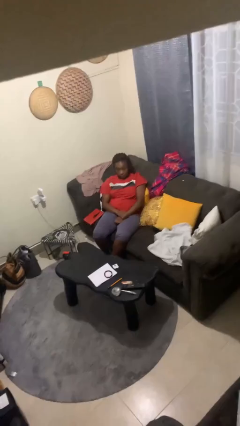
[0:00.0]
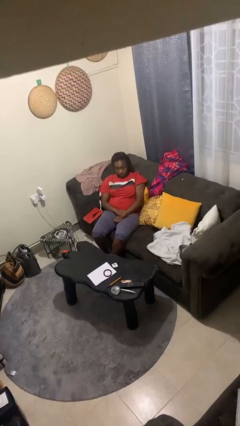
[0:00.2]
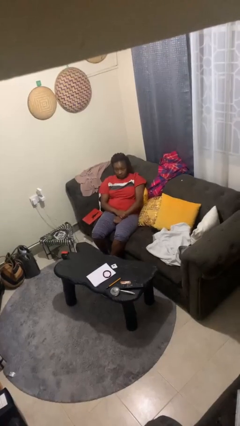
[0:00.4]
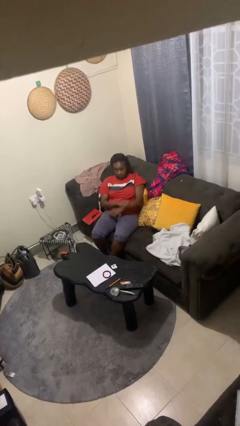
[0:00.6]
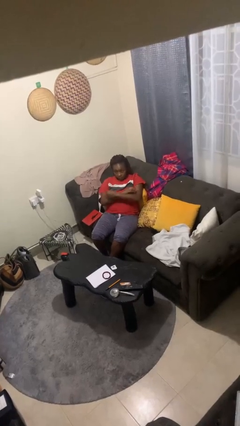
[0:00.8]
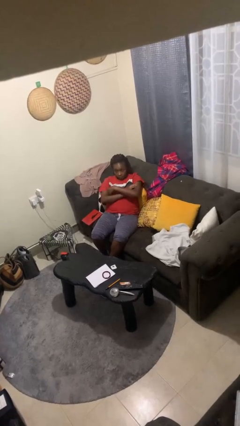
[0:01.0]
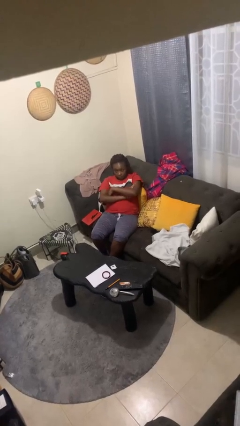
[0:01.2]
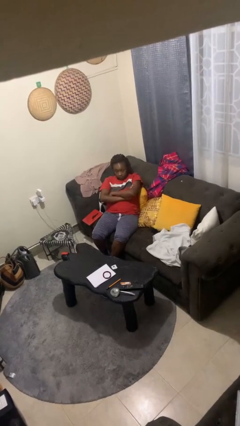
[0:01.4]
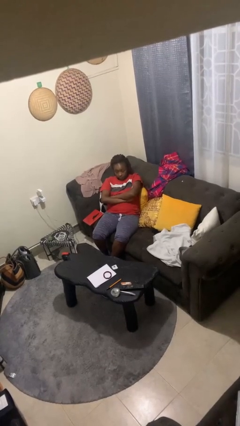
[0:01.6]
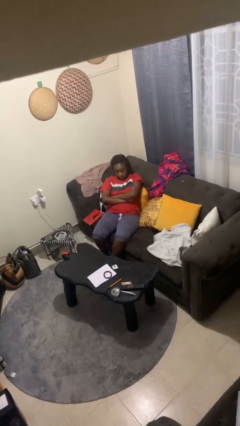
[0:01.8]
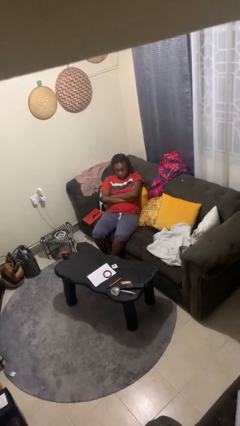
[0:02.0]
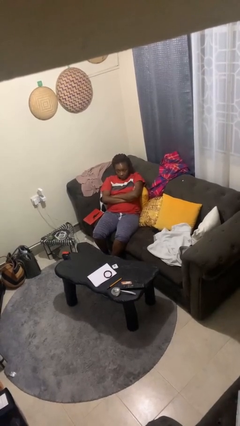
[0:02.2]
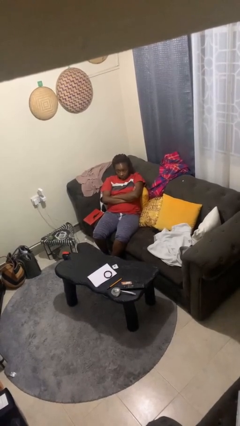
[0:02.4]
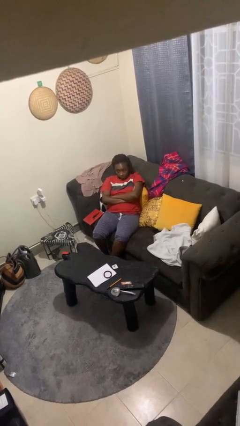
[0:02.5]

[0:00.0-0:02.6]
person crosses arms

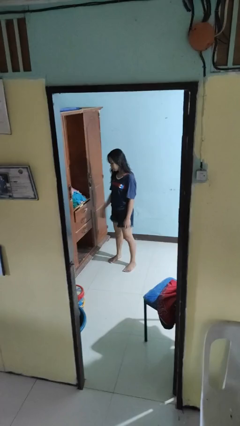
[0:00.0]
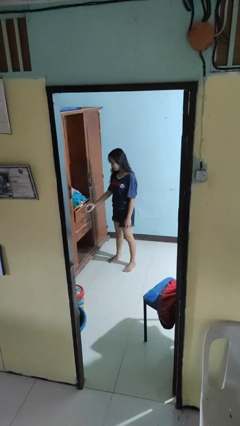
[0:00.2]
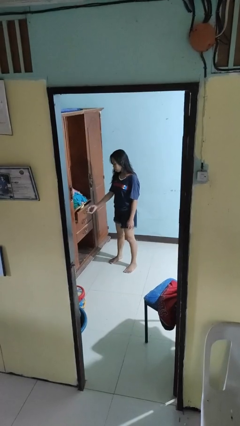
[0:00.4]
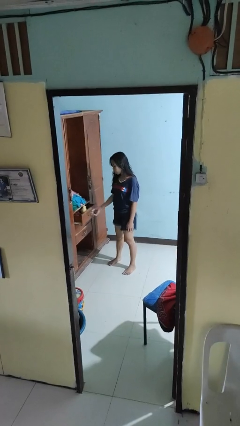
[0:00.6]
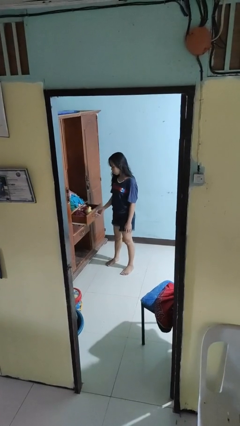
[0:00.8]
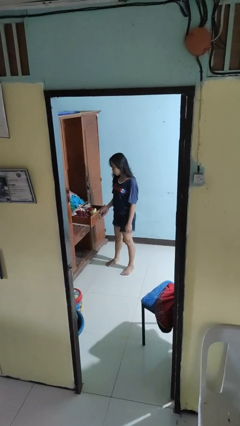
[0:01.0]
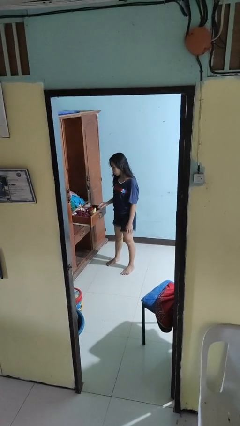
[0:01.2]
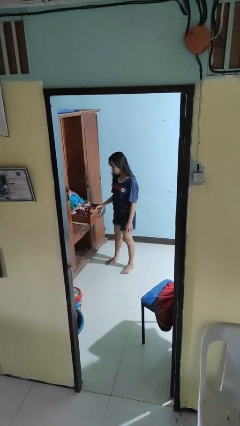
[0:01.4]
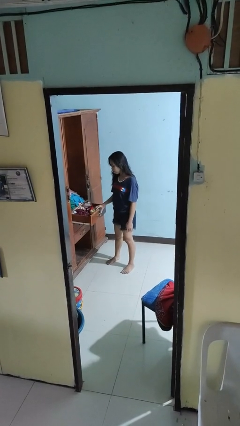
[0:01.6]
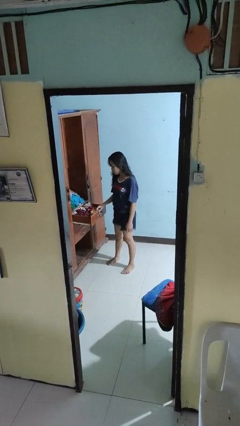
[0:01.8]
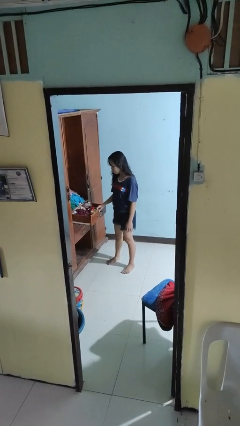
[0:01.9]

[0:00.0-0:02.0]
person opens dresser drawer

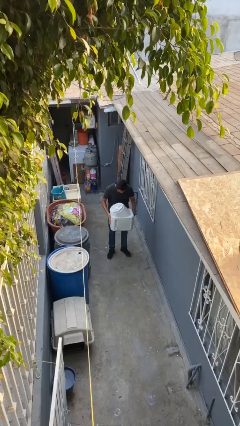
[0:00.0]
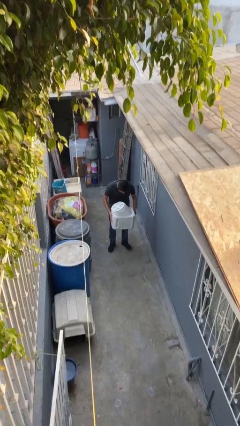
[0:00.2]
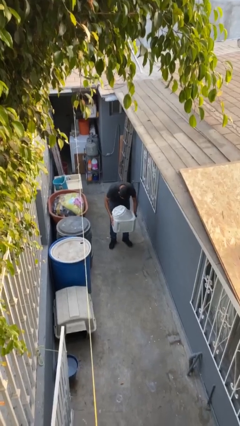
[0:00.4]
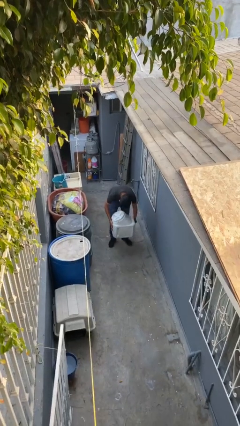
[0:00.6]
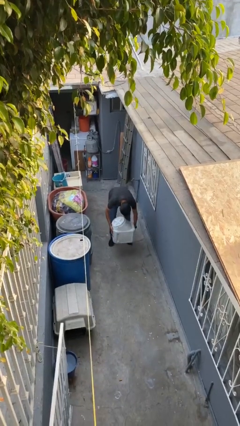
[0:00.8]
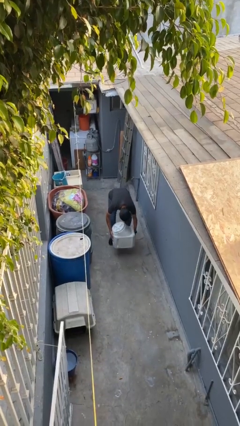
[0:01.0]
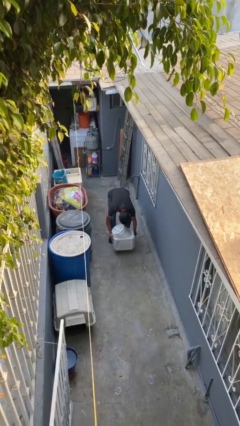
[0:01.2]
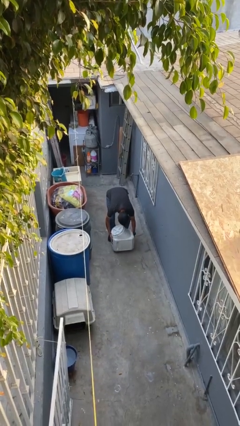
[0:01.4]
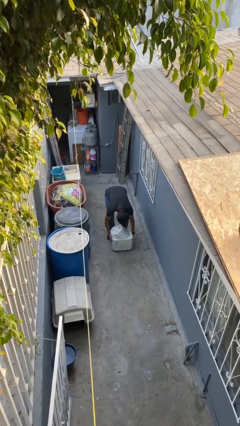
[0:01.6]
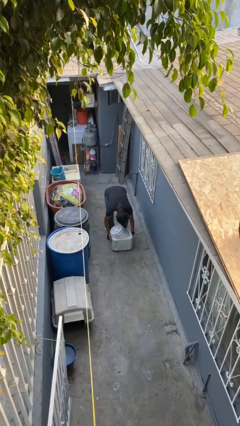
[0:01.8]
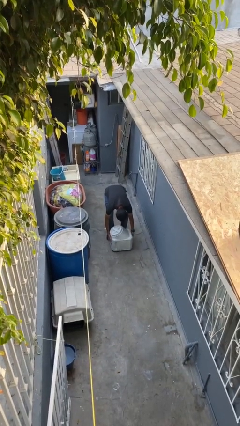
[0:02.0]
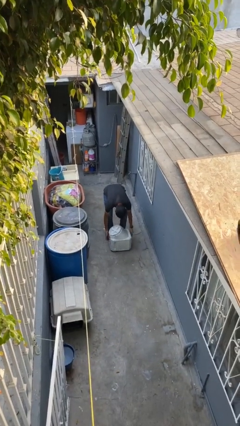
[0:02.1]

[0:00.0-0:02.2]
person puts down object on floor

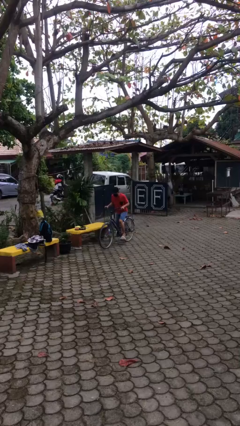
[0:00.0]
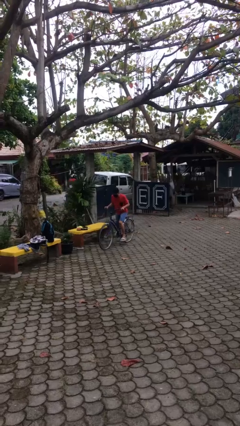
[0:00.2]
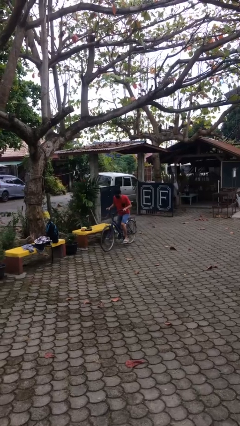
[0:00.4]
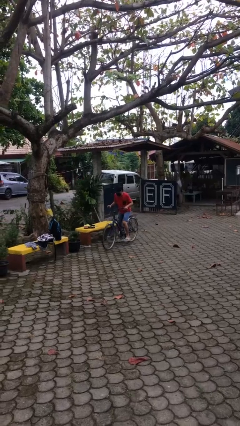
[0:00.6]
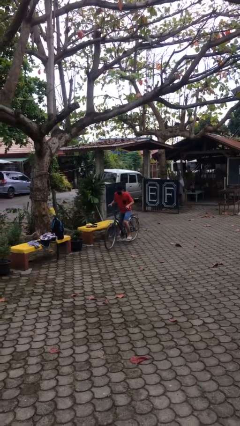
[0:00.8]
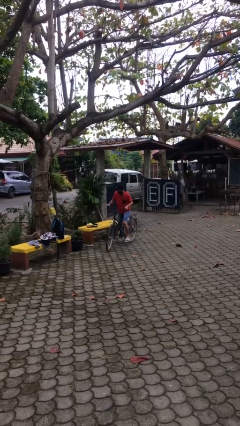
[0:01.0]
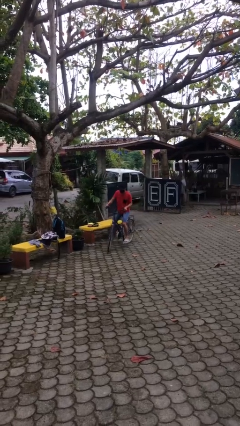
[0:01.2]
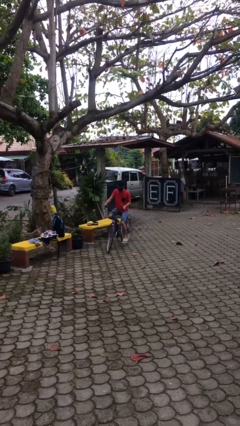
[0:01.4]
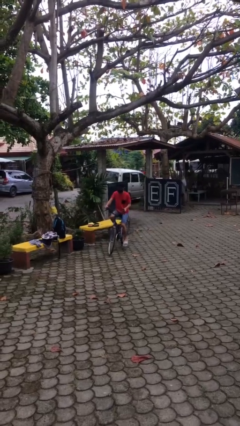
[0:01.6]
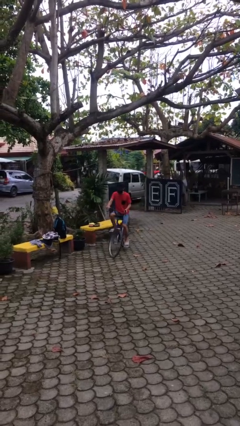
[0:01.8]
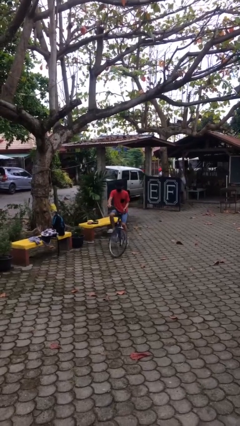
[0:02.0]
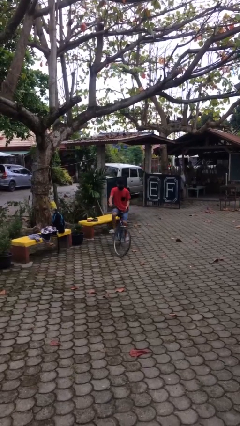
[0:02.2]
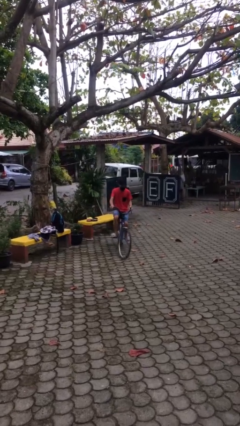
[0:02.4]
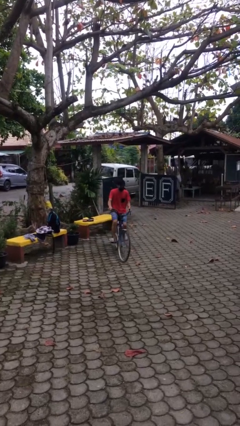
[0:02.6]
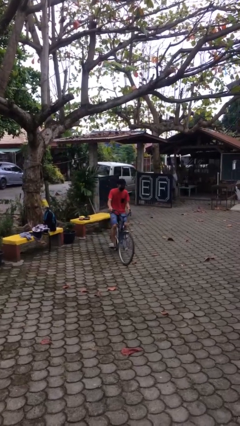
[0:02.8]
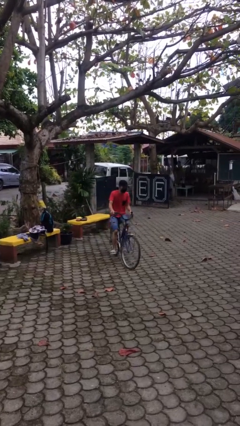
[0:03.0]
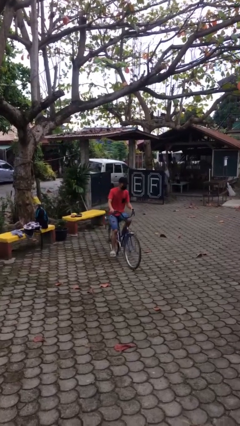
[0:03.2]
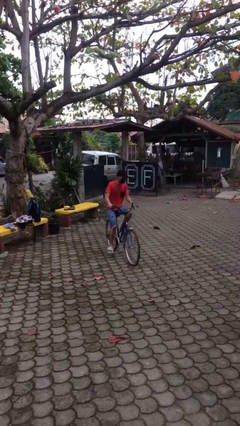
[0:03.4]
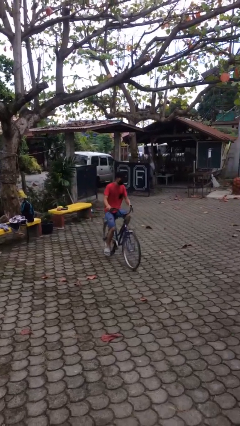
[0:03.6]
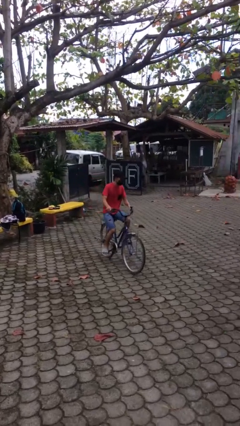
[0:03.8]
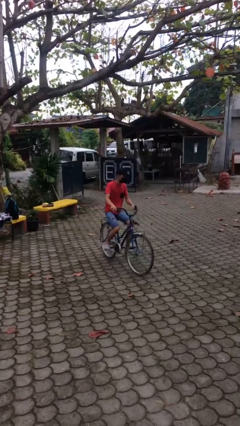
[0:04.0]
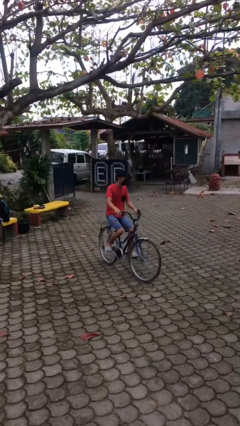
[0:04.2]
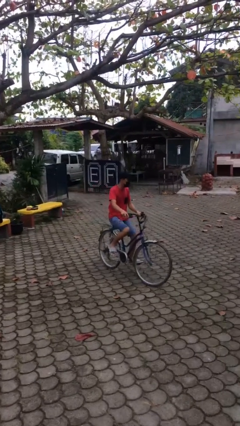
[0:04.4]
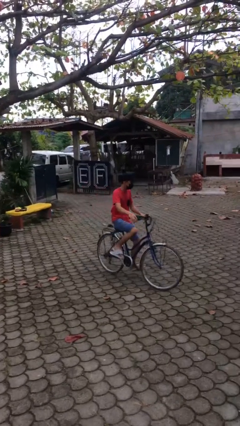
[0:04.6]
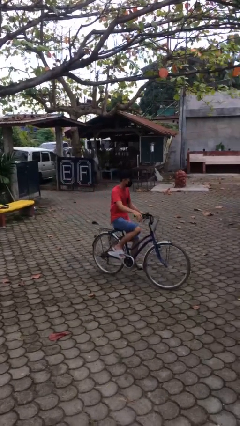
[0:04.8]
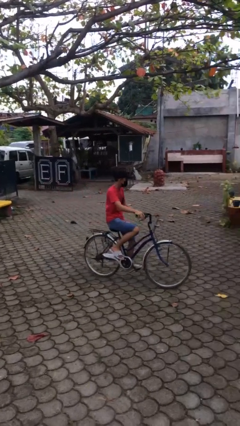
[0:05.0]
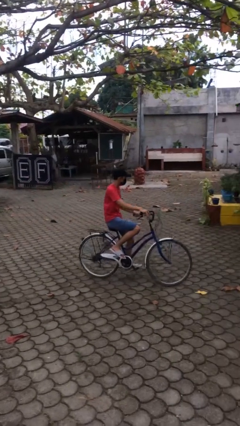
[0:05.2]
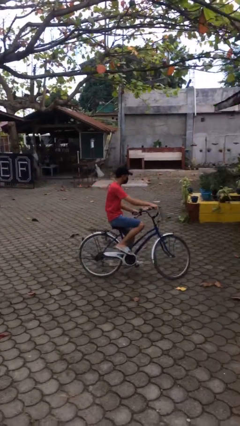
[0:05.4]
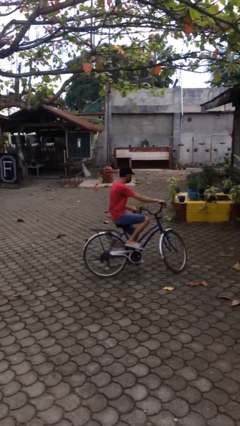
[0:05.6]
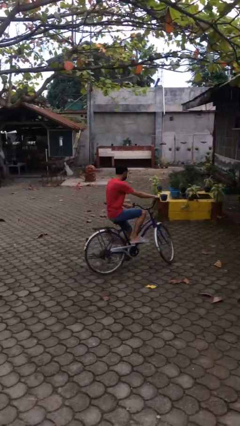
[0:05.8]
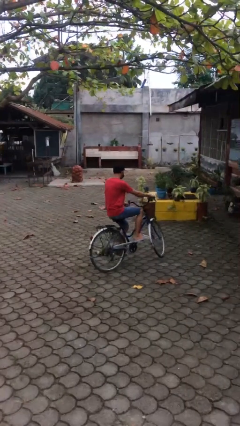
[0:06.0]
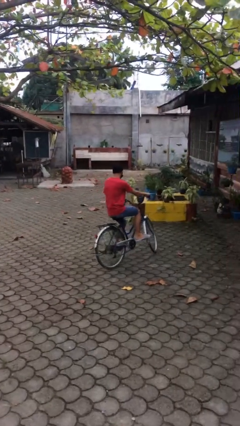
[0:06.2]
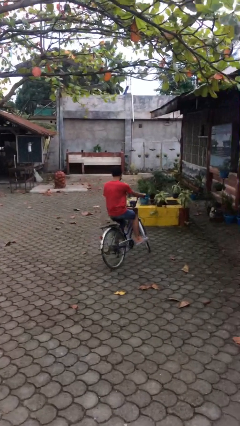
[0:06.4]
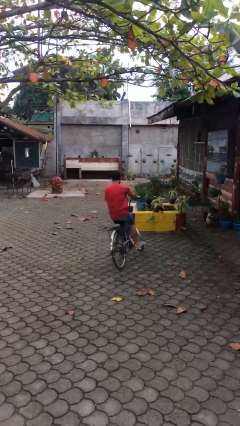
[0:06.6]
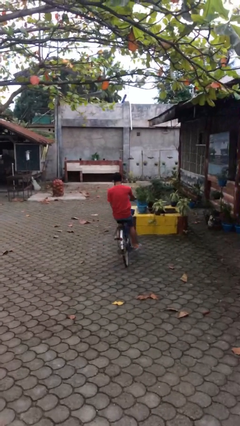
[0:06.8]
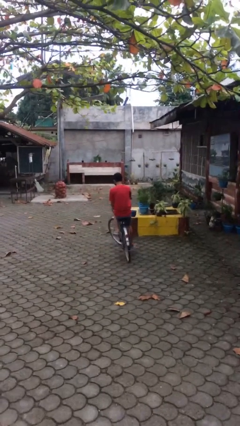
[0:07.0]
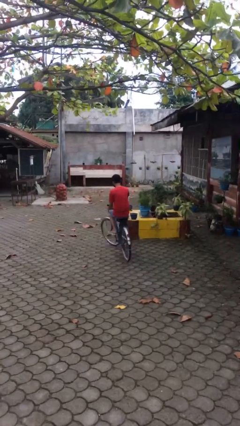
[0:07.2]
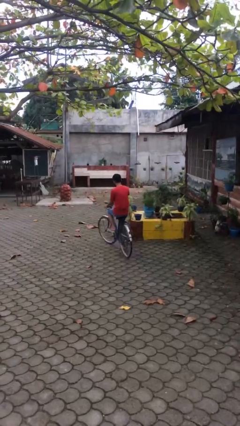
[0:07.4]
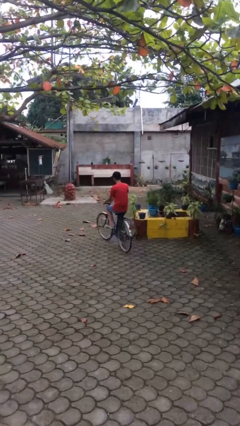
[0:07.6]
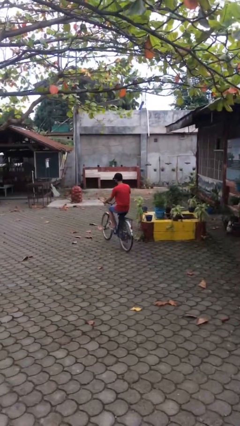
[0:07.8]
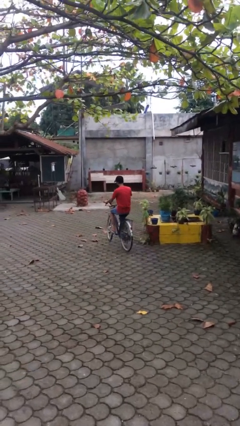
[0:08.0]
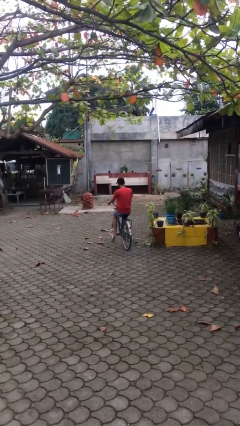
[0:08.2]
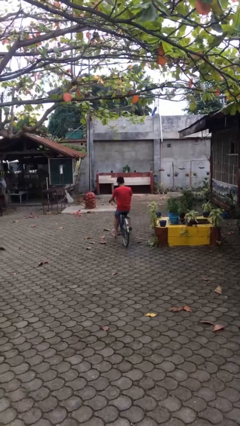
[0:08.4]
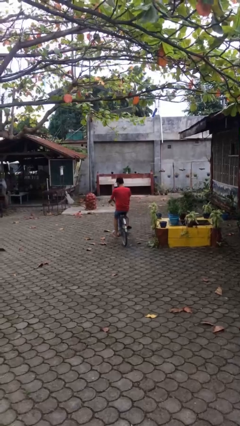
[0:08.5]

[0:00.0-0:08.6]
person rides bicycle

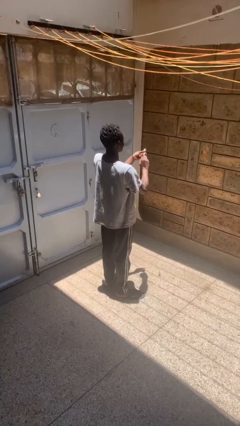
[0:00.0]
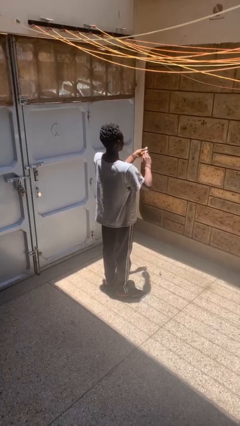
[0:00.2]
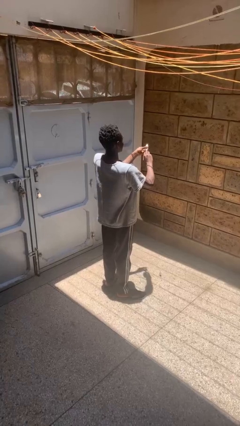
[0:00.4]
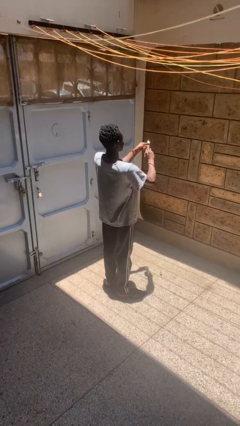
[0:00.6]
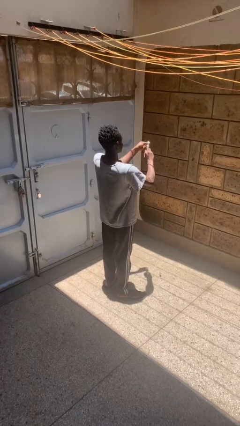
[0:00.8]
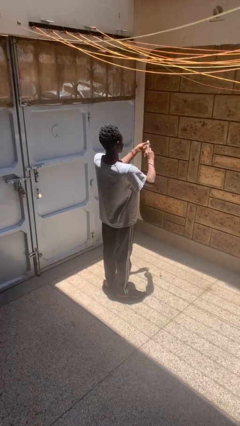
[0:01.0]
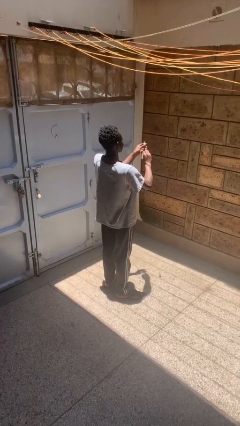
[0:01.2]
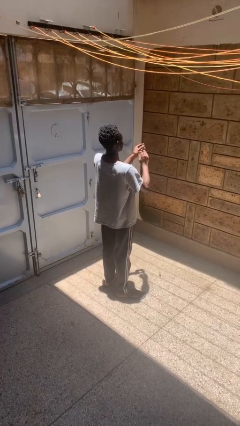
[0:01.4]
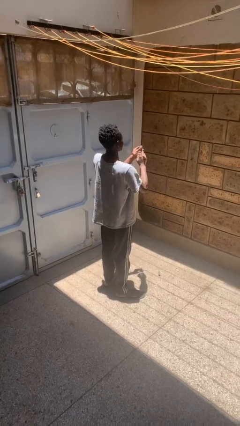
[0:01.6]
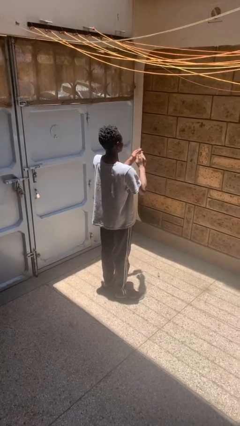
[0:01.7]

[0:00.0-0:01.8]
person clips fingernails

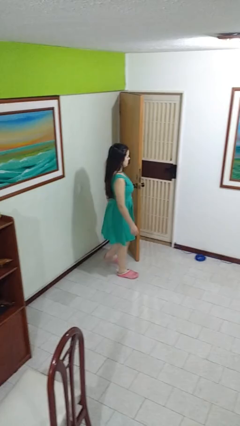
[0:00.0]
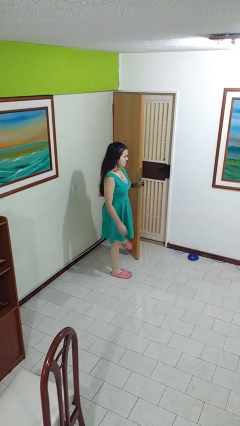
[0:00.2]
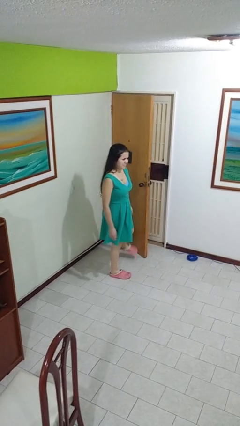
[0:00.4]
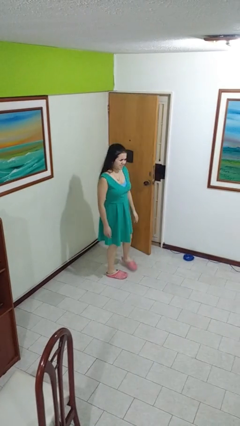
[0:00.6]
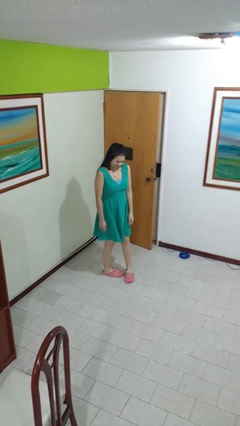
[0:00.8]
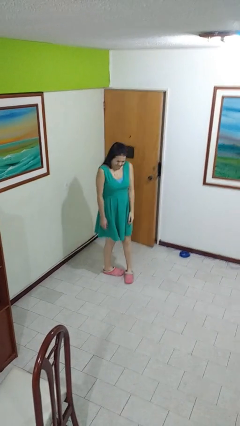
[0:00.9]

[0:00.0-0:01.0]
person closes door with foot
